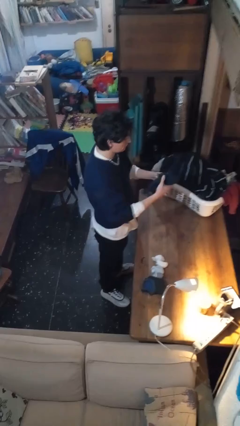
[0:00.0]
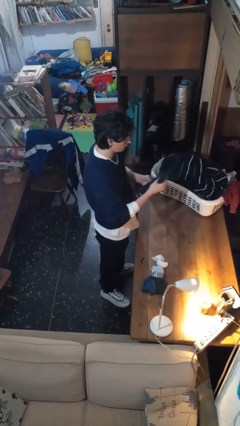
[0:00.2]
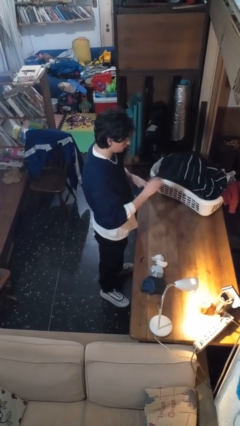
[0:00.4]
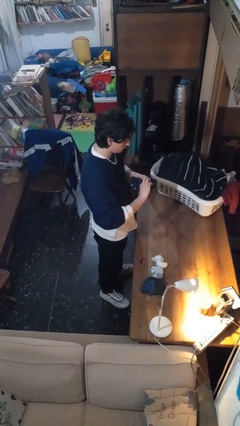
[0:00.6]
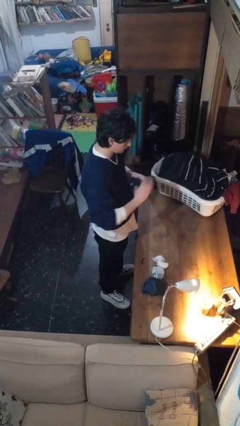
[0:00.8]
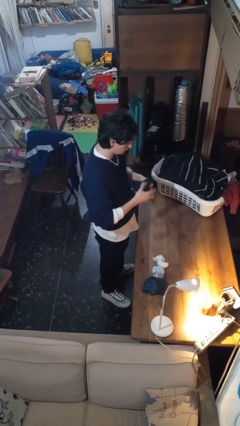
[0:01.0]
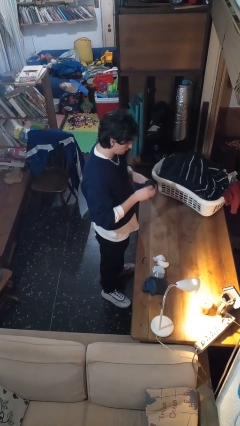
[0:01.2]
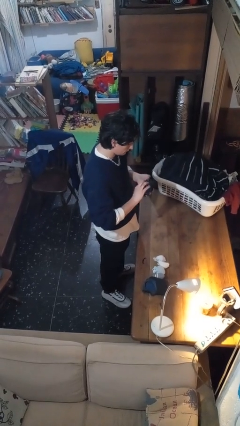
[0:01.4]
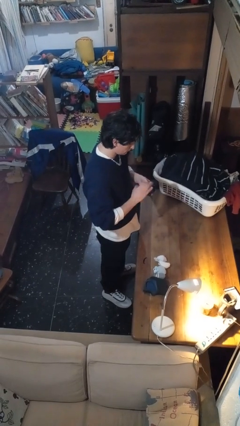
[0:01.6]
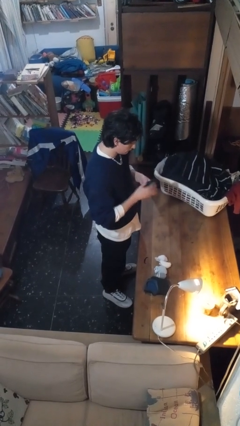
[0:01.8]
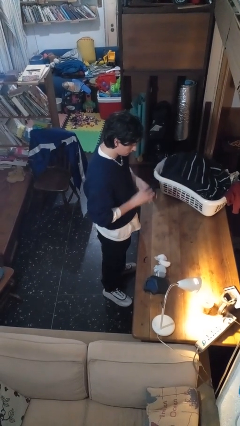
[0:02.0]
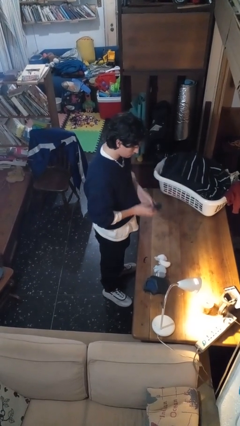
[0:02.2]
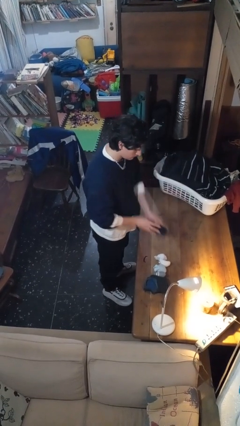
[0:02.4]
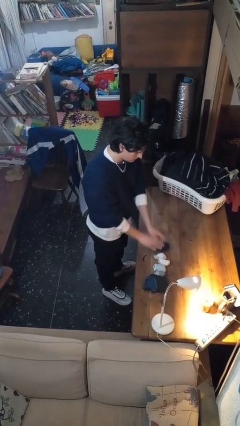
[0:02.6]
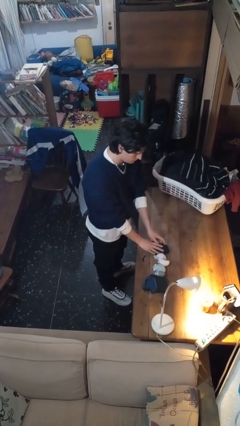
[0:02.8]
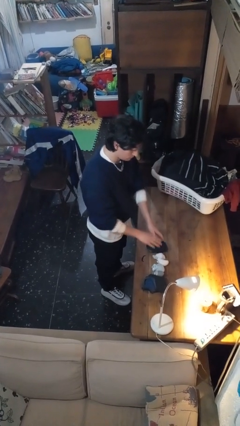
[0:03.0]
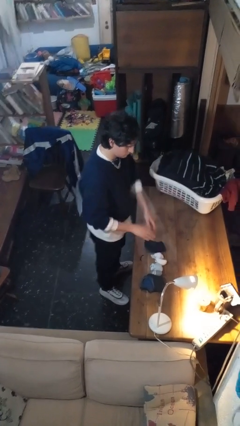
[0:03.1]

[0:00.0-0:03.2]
person folds socks

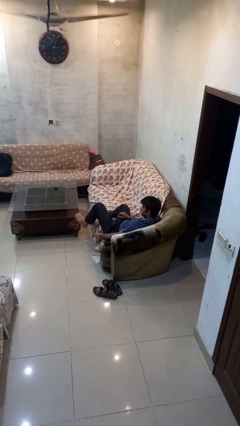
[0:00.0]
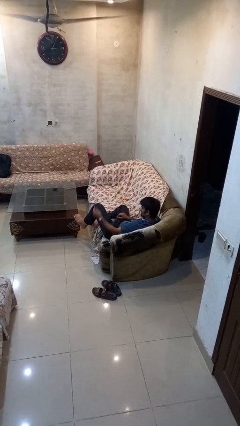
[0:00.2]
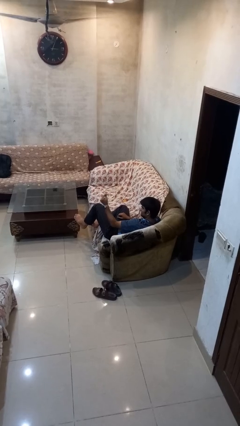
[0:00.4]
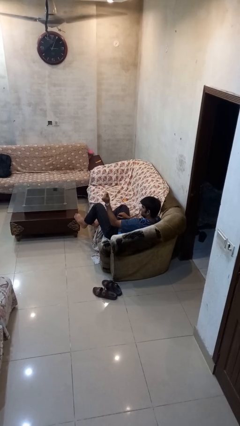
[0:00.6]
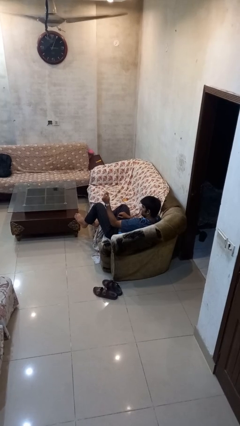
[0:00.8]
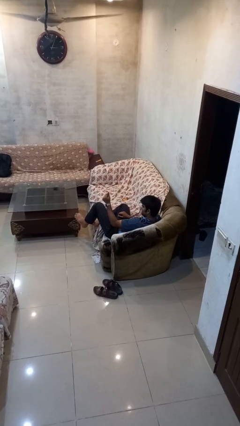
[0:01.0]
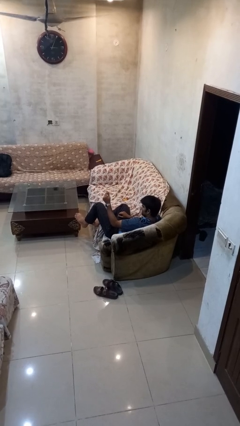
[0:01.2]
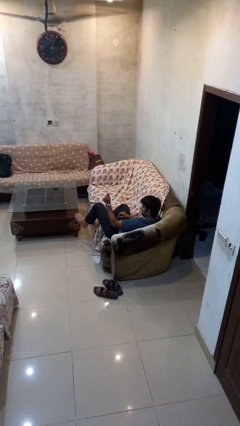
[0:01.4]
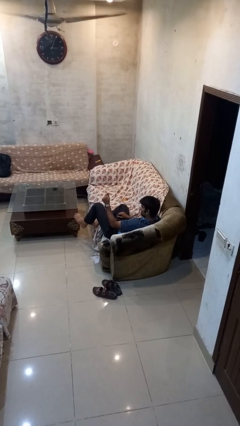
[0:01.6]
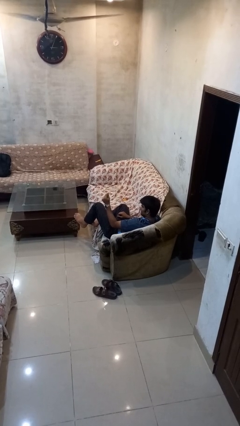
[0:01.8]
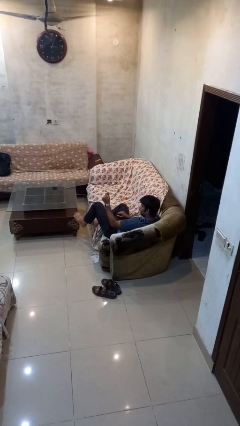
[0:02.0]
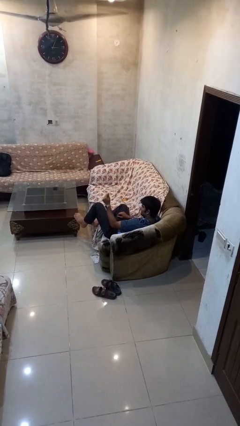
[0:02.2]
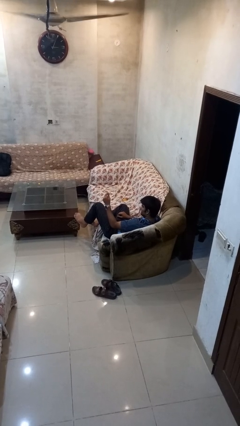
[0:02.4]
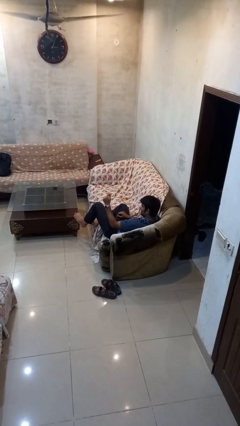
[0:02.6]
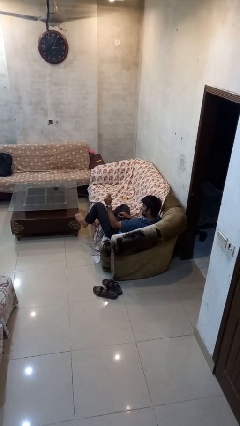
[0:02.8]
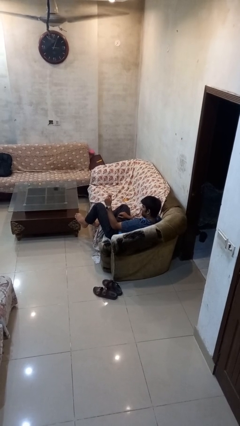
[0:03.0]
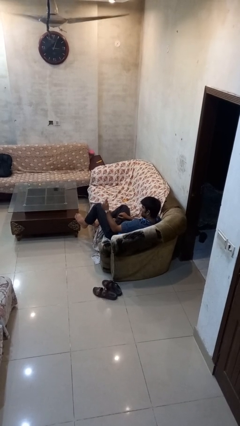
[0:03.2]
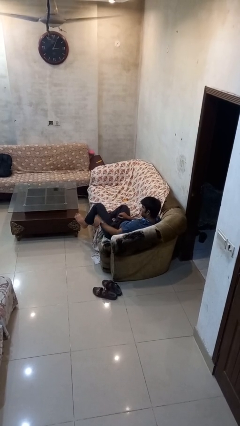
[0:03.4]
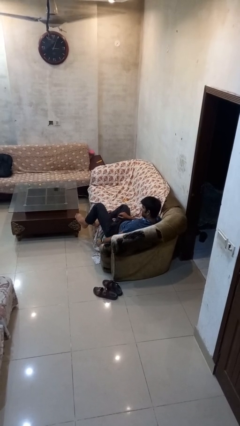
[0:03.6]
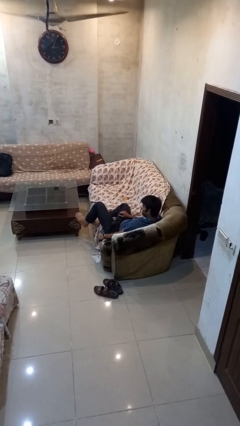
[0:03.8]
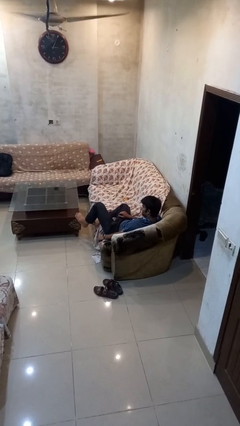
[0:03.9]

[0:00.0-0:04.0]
person snaps fingers

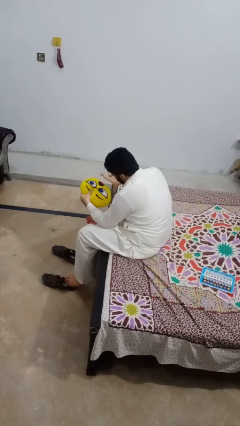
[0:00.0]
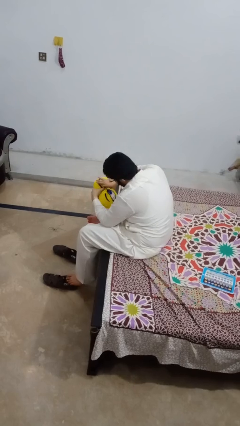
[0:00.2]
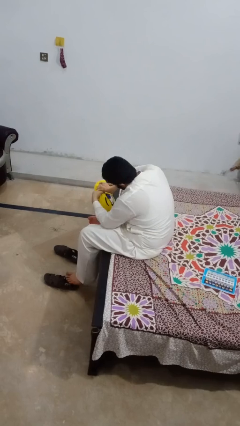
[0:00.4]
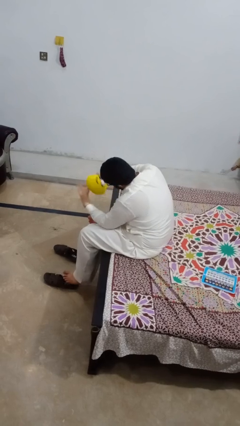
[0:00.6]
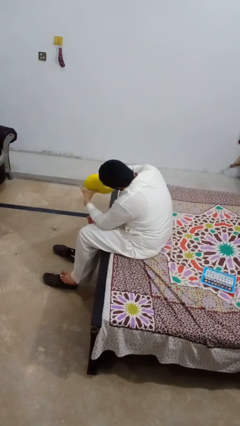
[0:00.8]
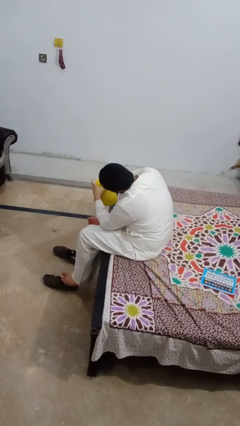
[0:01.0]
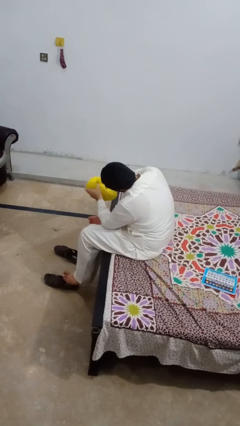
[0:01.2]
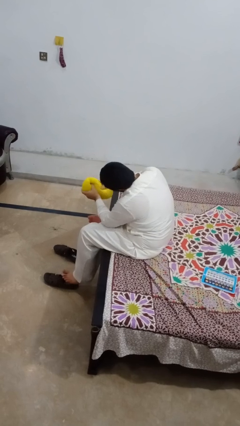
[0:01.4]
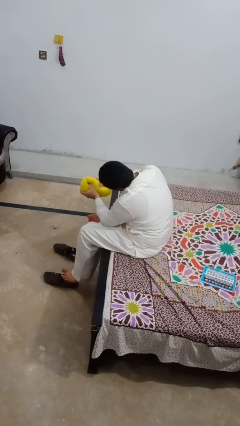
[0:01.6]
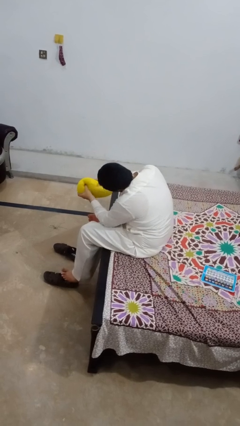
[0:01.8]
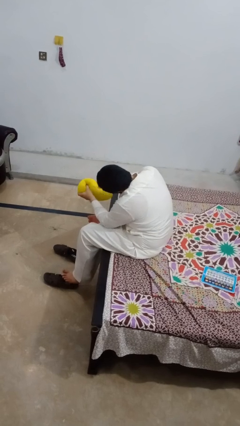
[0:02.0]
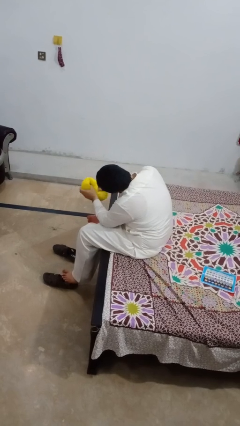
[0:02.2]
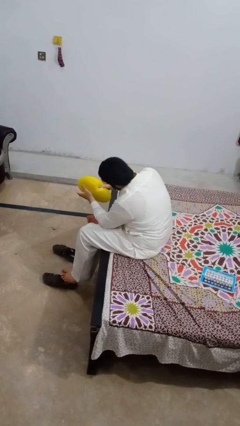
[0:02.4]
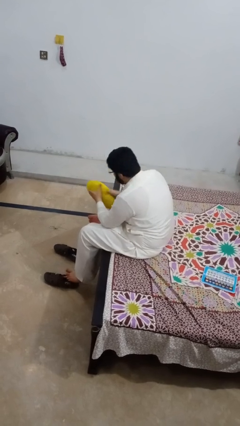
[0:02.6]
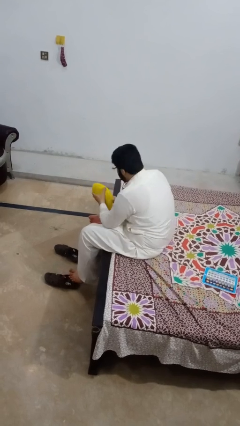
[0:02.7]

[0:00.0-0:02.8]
person squeezes object

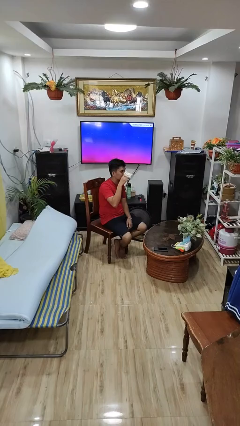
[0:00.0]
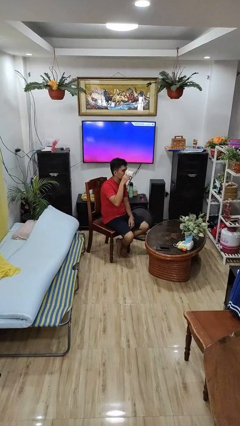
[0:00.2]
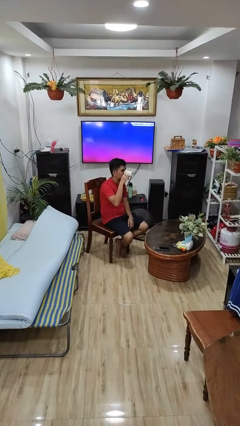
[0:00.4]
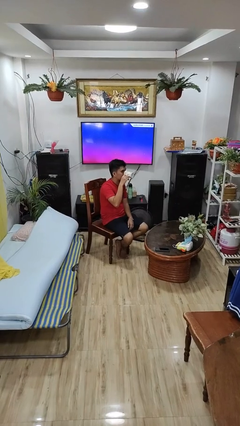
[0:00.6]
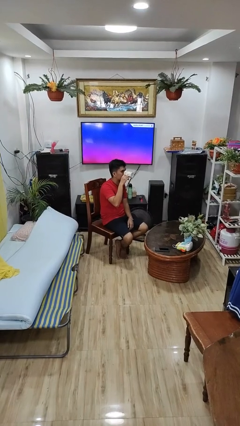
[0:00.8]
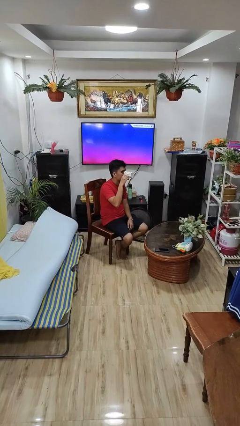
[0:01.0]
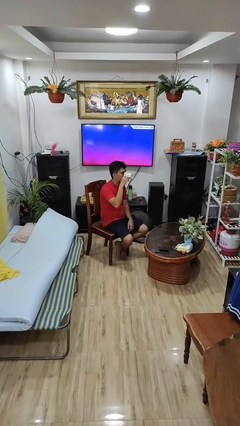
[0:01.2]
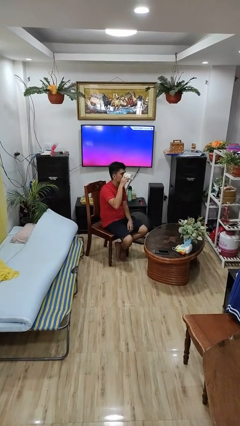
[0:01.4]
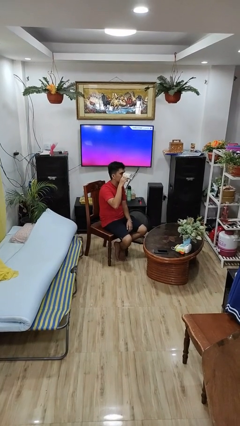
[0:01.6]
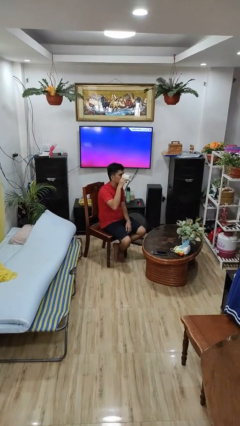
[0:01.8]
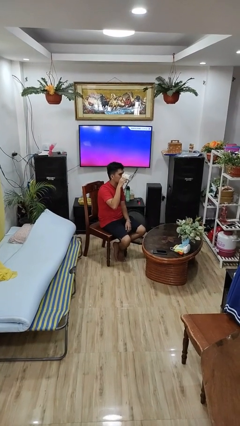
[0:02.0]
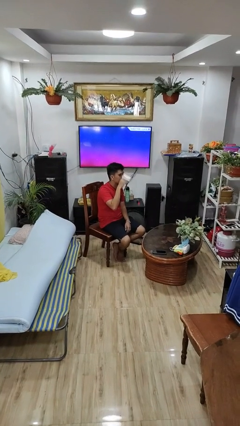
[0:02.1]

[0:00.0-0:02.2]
person drinks from mug

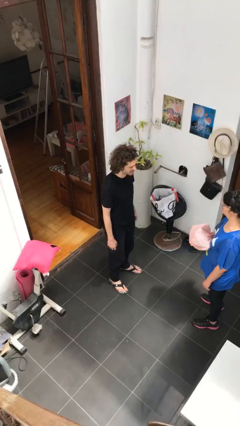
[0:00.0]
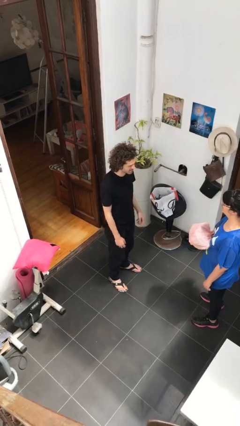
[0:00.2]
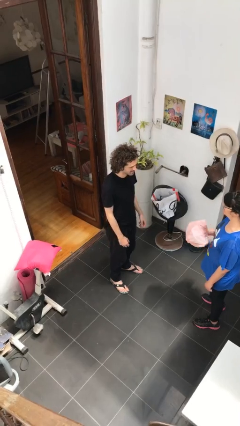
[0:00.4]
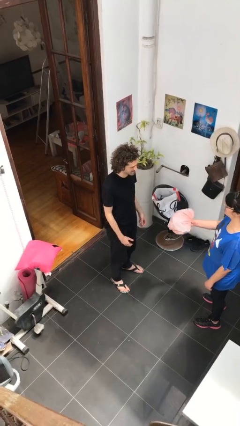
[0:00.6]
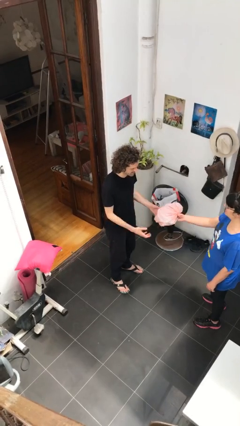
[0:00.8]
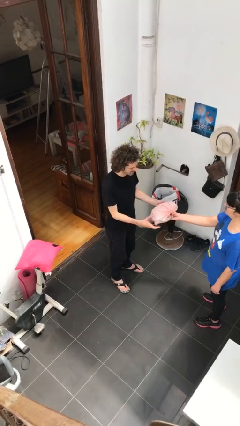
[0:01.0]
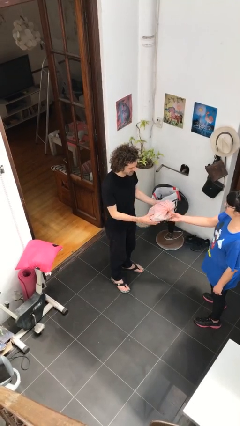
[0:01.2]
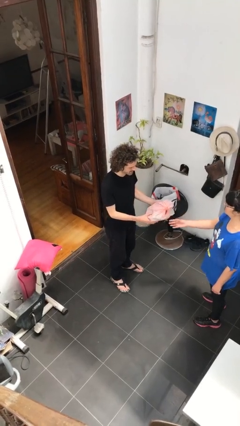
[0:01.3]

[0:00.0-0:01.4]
person transfers object to person

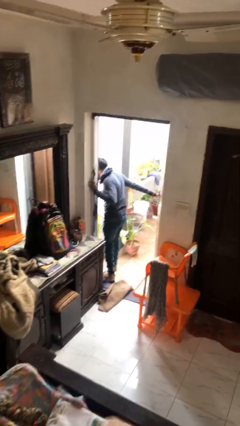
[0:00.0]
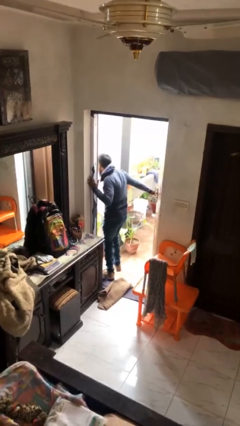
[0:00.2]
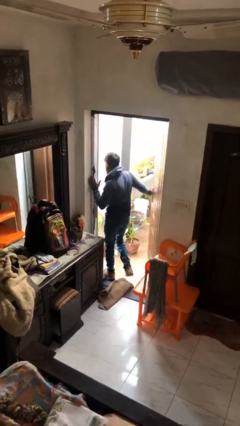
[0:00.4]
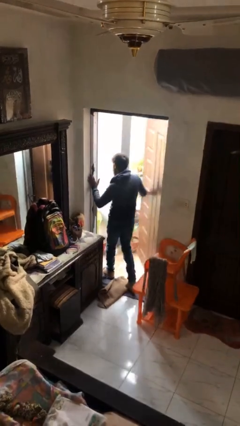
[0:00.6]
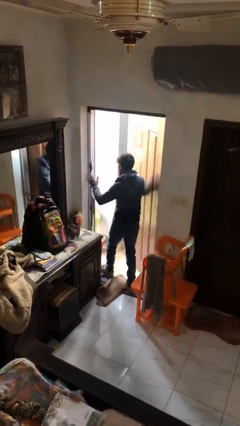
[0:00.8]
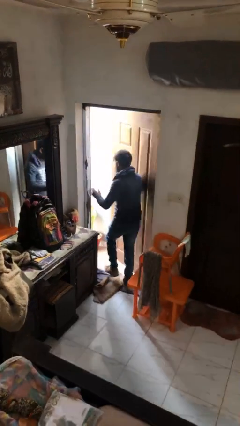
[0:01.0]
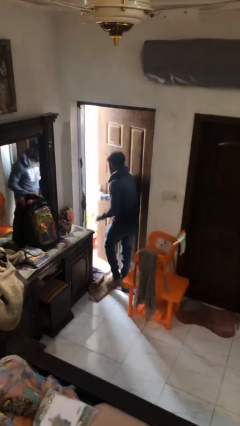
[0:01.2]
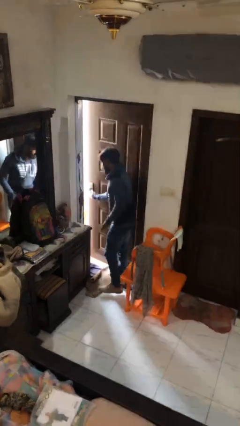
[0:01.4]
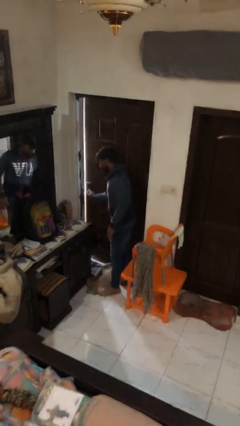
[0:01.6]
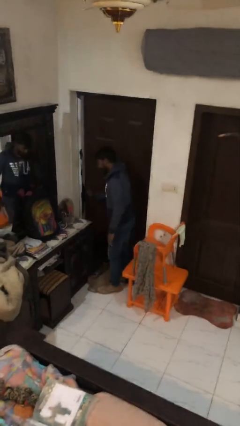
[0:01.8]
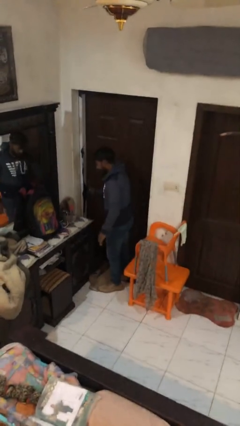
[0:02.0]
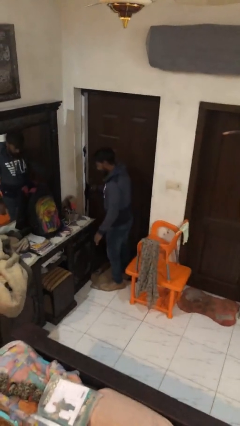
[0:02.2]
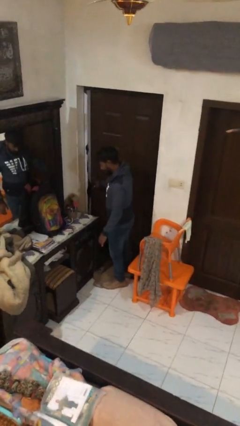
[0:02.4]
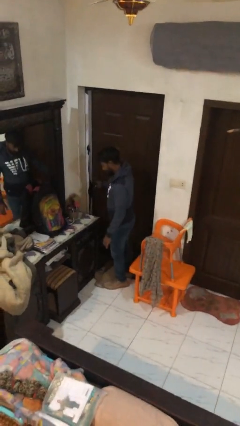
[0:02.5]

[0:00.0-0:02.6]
person closes facility door

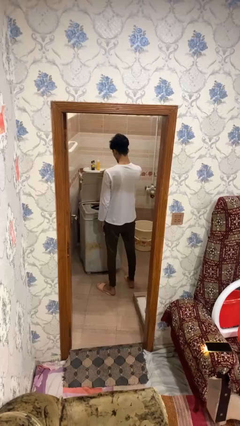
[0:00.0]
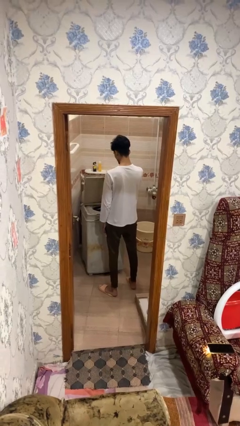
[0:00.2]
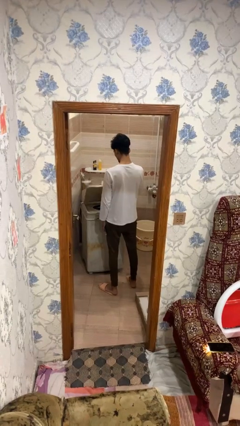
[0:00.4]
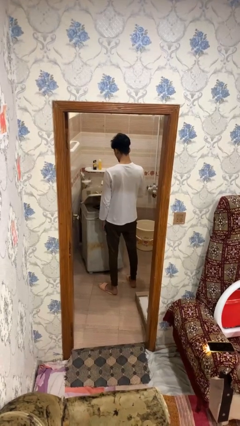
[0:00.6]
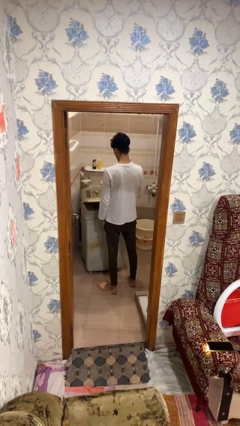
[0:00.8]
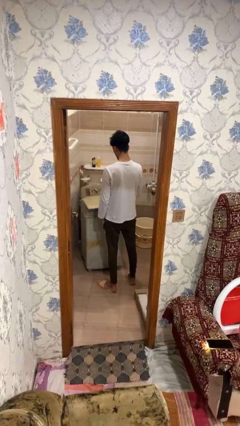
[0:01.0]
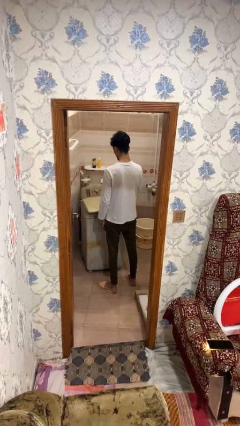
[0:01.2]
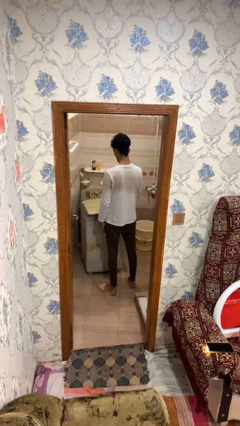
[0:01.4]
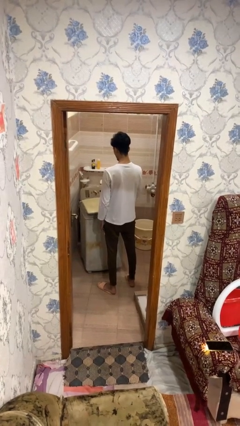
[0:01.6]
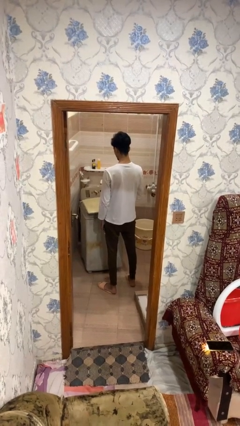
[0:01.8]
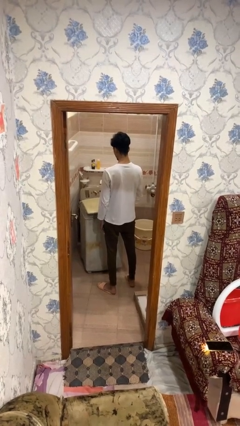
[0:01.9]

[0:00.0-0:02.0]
person closes clothes washer
